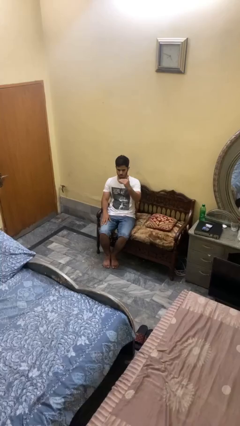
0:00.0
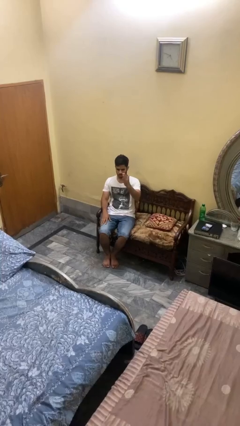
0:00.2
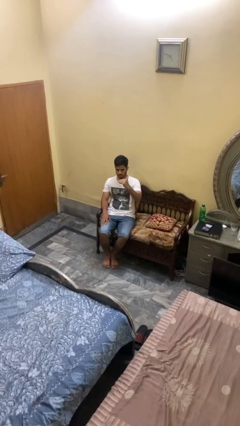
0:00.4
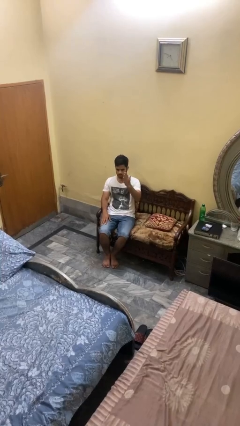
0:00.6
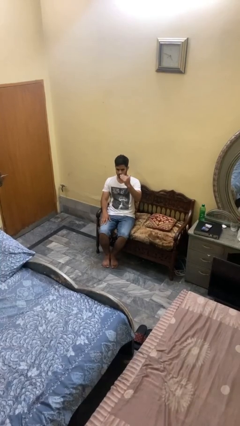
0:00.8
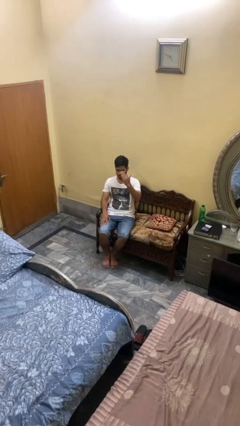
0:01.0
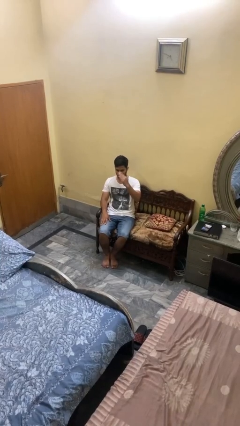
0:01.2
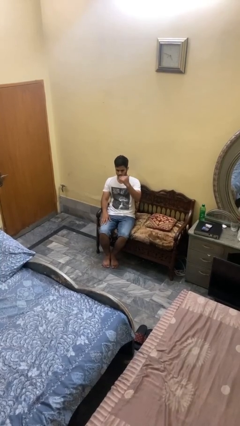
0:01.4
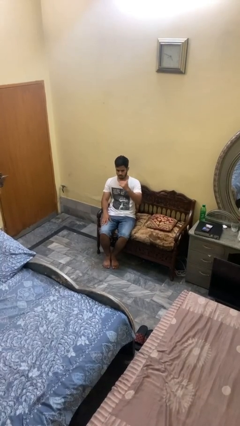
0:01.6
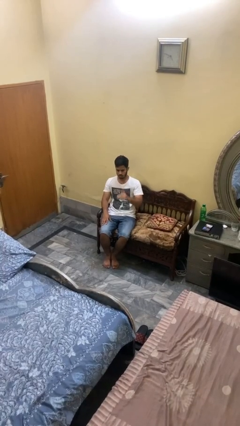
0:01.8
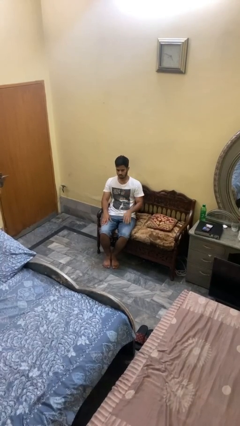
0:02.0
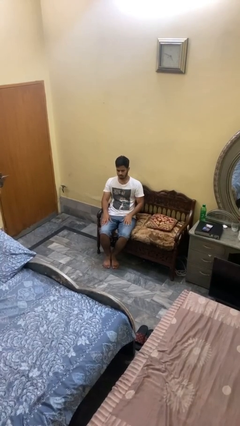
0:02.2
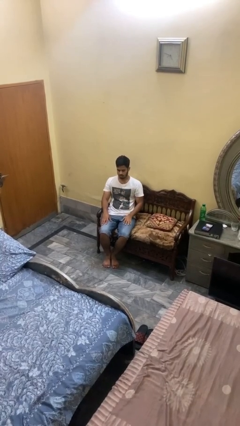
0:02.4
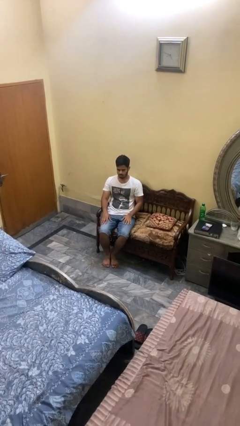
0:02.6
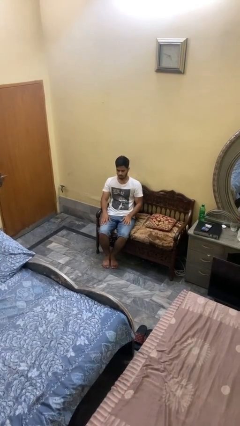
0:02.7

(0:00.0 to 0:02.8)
person gestures come here

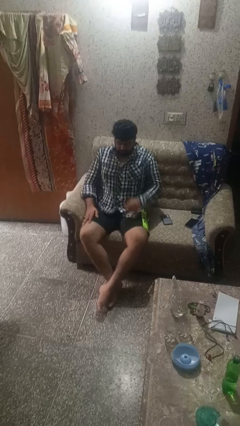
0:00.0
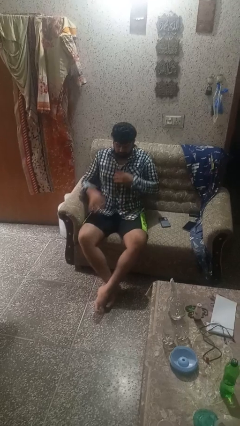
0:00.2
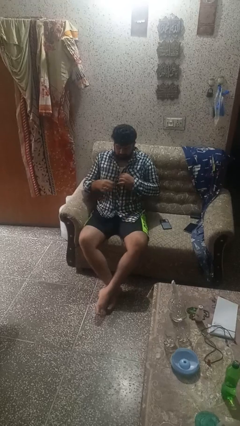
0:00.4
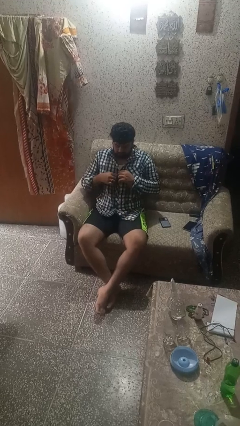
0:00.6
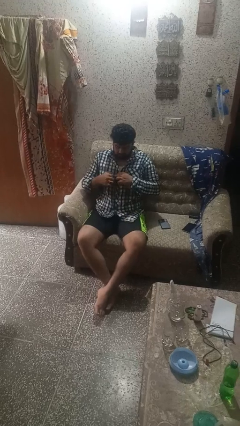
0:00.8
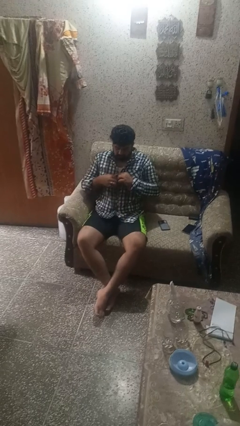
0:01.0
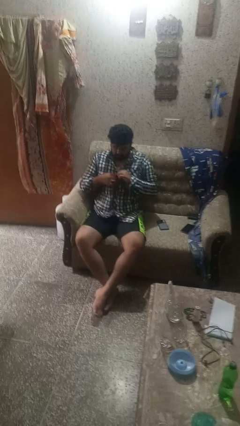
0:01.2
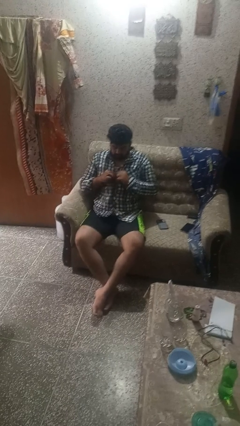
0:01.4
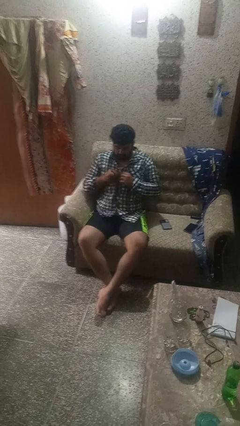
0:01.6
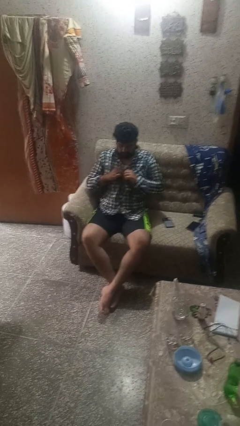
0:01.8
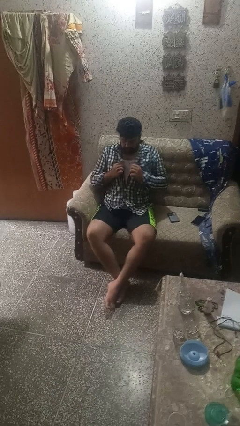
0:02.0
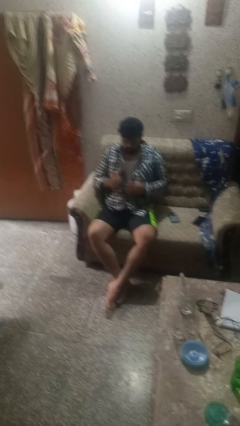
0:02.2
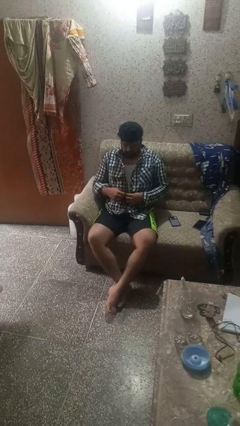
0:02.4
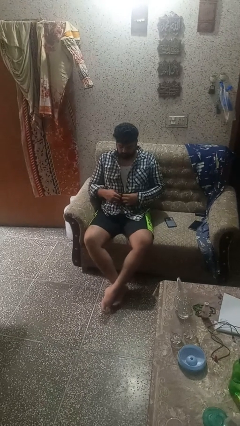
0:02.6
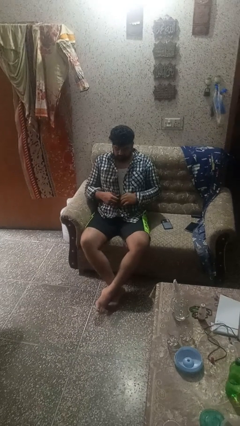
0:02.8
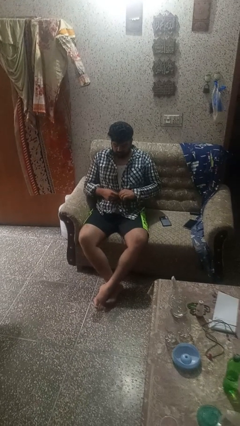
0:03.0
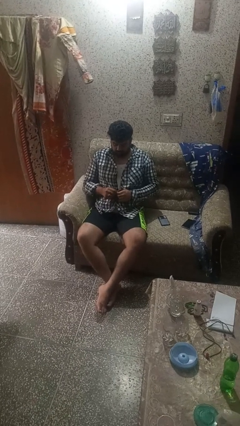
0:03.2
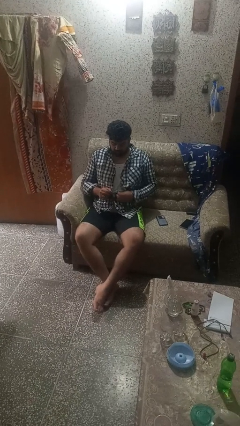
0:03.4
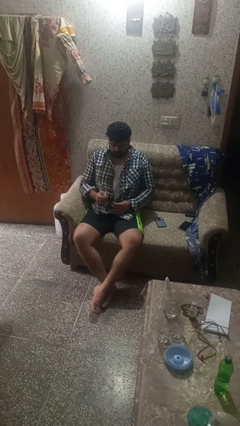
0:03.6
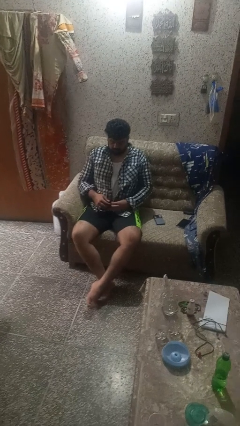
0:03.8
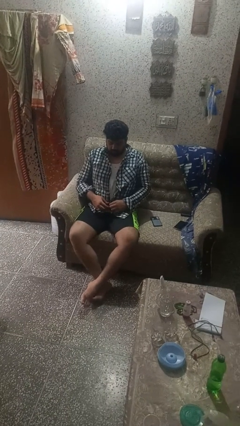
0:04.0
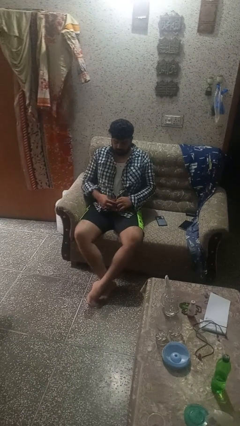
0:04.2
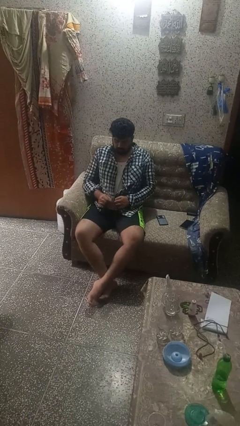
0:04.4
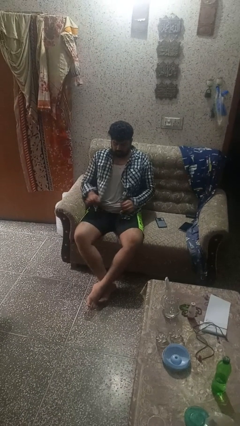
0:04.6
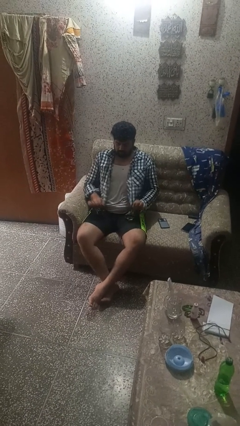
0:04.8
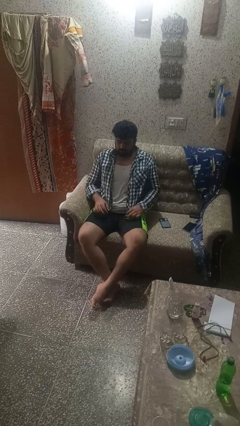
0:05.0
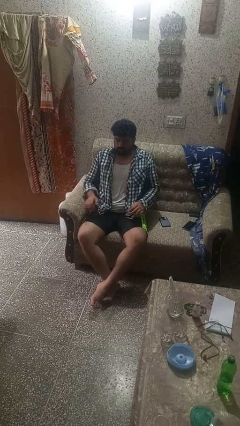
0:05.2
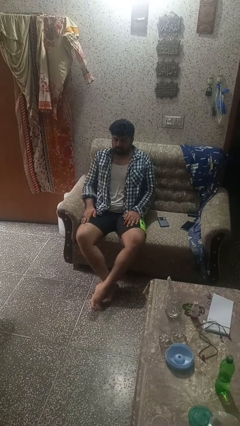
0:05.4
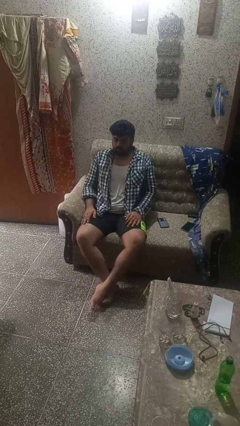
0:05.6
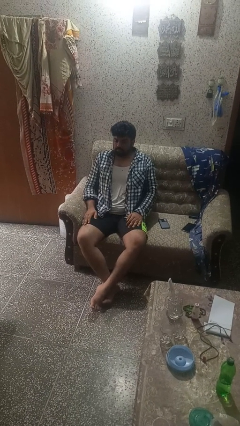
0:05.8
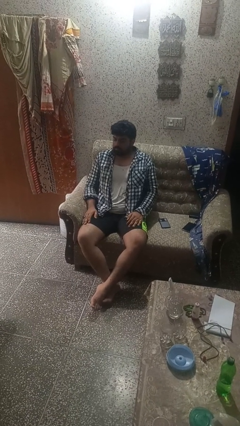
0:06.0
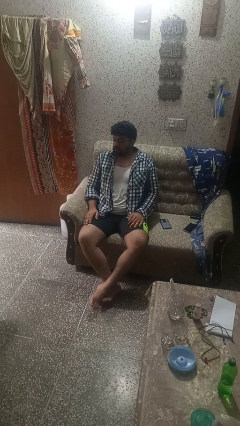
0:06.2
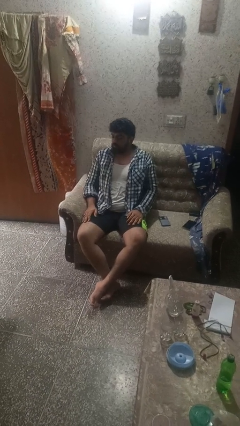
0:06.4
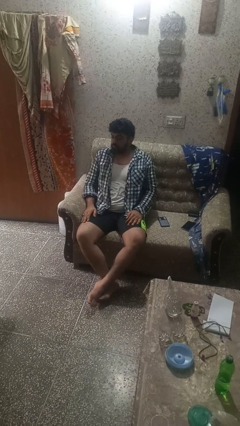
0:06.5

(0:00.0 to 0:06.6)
person unbuttons shirt

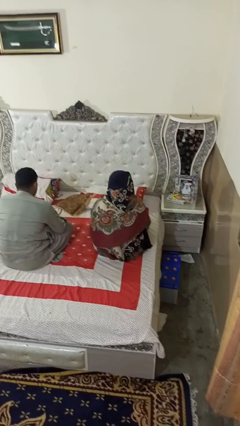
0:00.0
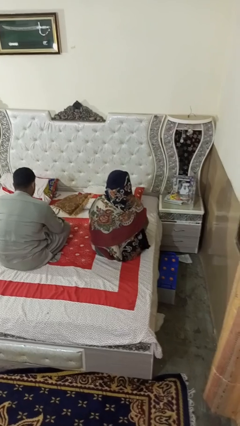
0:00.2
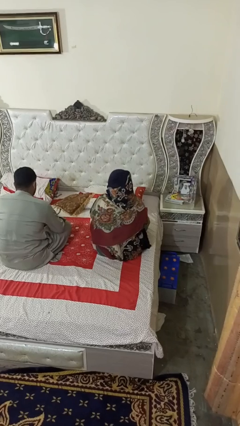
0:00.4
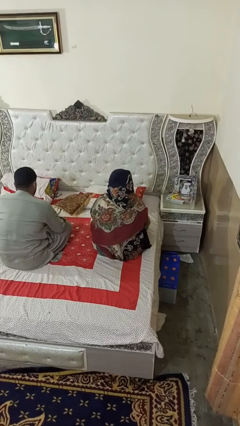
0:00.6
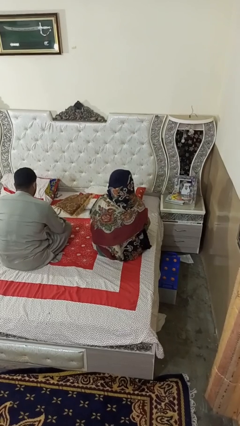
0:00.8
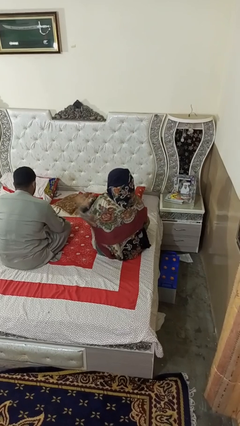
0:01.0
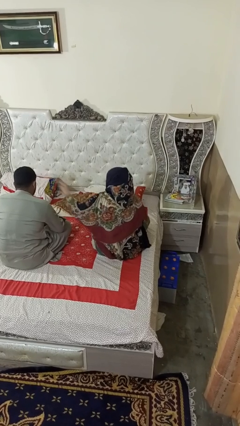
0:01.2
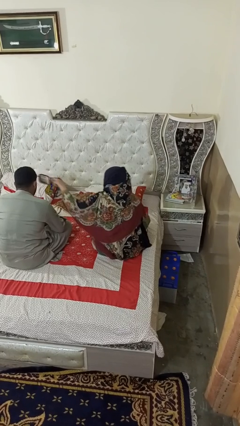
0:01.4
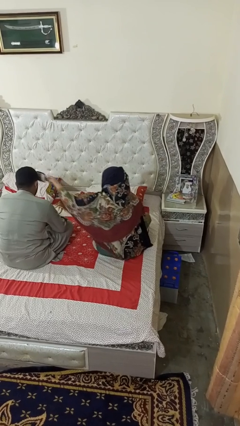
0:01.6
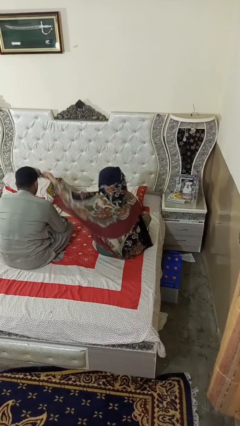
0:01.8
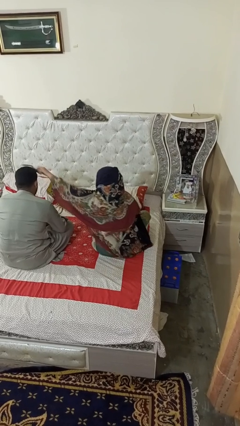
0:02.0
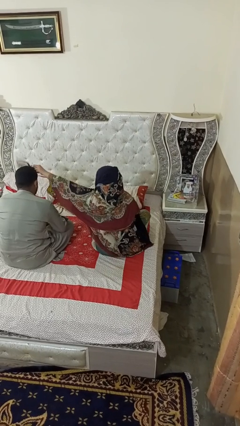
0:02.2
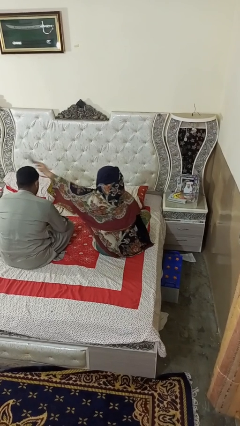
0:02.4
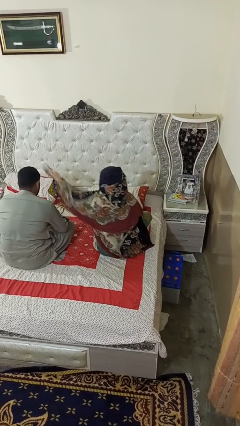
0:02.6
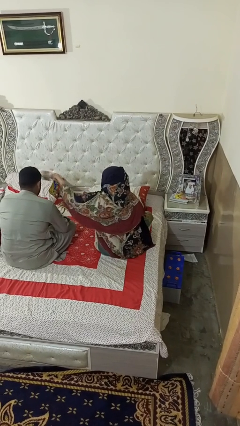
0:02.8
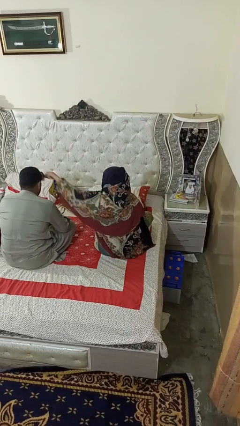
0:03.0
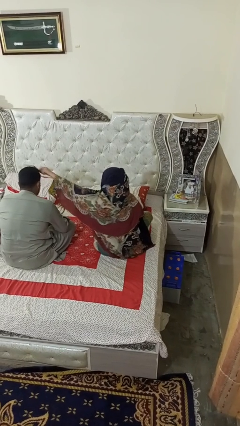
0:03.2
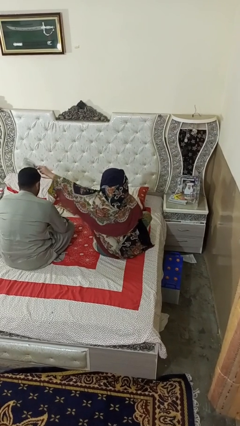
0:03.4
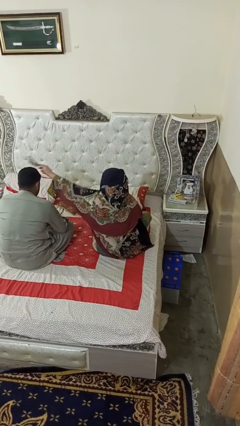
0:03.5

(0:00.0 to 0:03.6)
person brushes hair of person

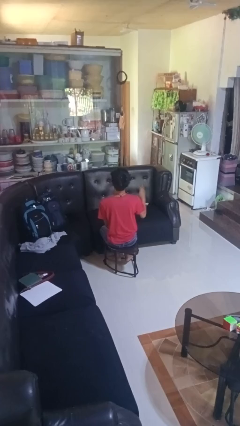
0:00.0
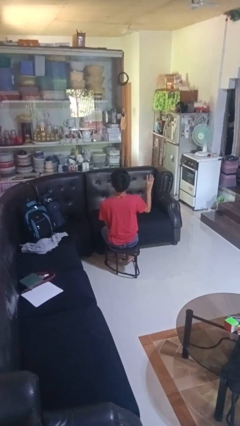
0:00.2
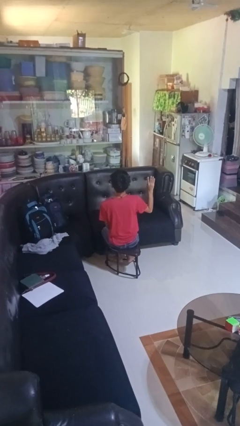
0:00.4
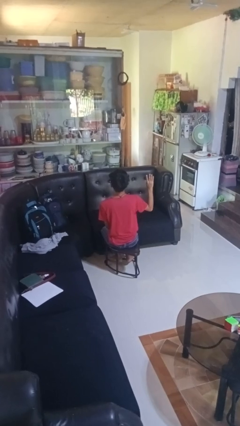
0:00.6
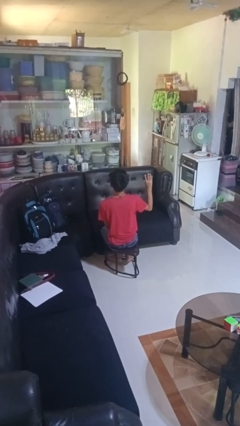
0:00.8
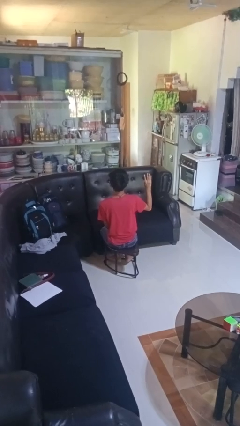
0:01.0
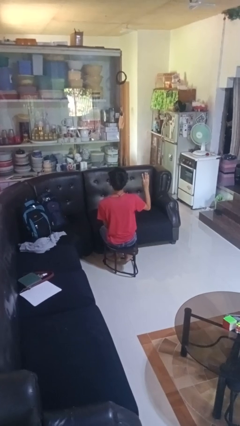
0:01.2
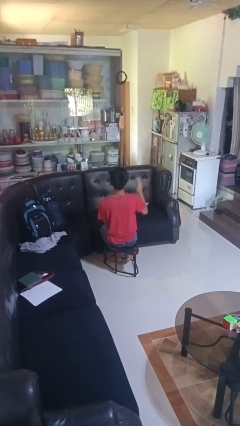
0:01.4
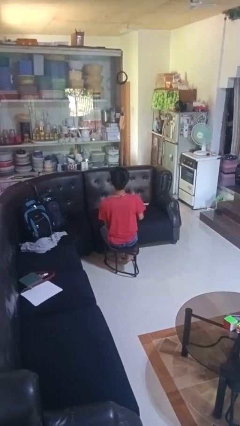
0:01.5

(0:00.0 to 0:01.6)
person gestures number four

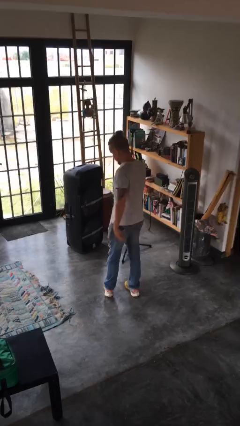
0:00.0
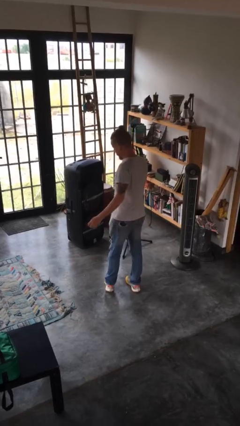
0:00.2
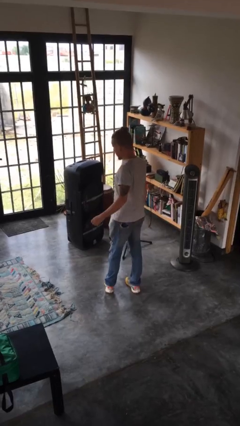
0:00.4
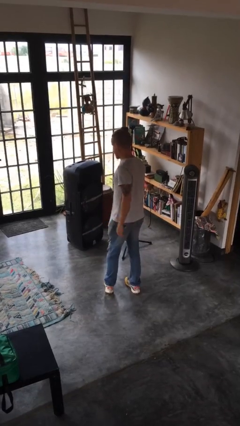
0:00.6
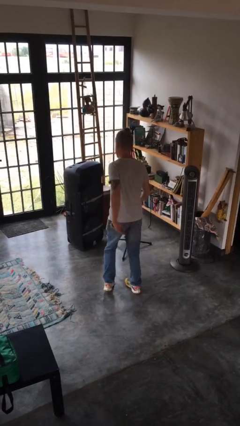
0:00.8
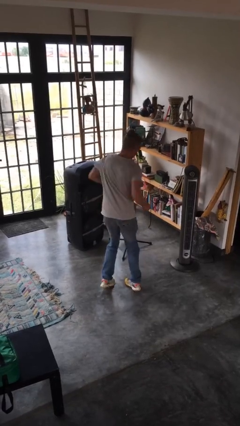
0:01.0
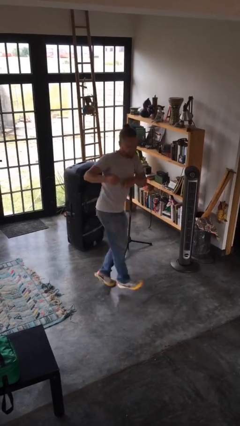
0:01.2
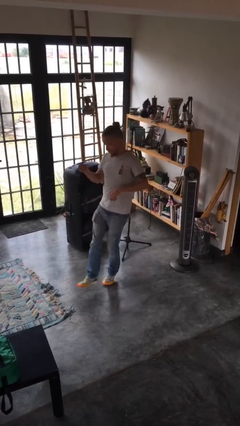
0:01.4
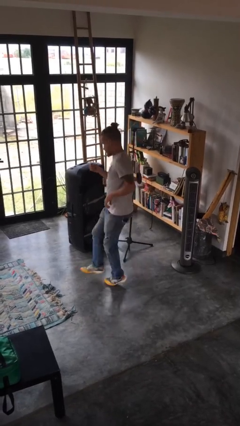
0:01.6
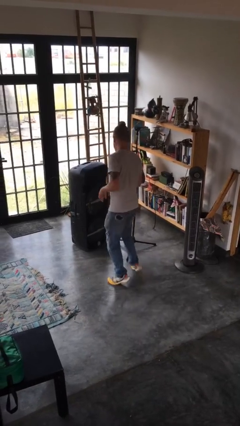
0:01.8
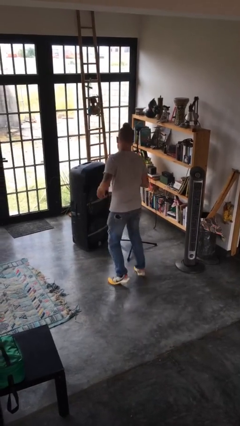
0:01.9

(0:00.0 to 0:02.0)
person twirls

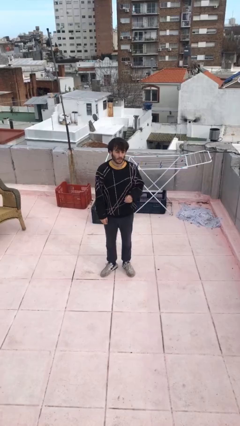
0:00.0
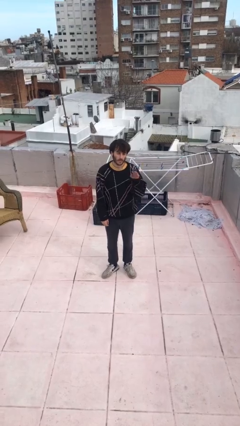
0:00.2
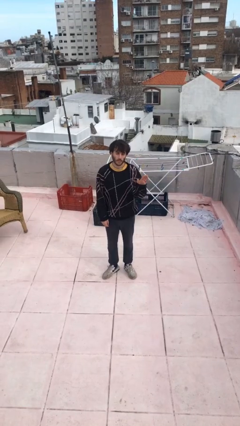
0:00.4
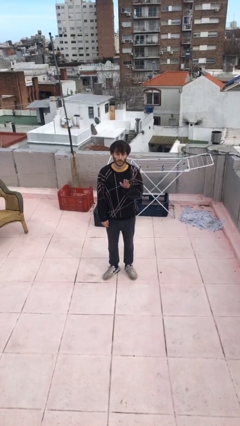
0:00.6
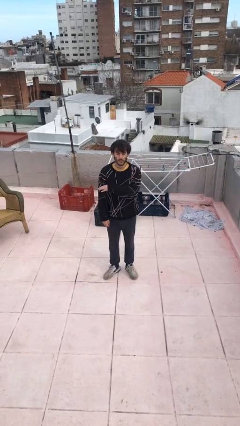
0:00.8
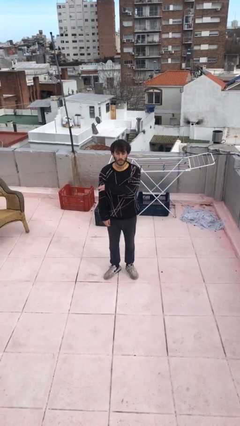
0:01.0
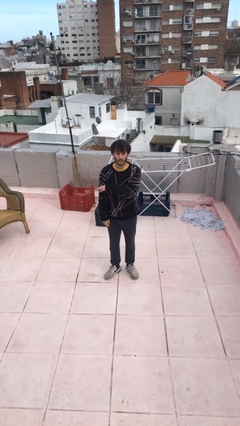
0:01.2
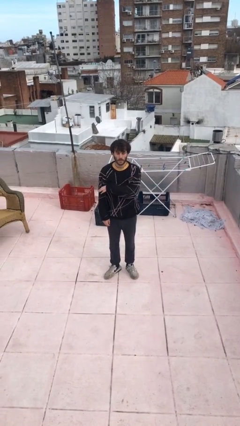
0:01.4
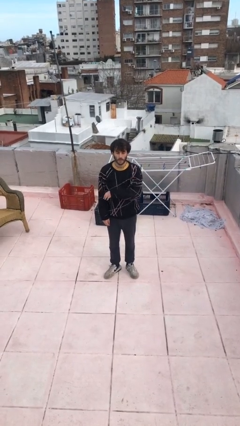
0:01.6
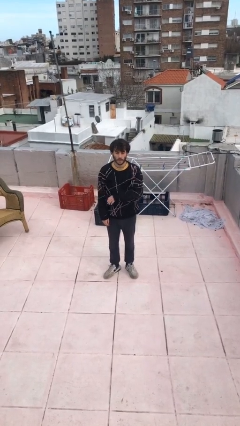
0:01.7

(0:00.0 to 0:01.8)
person gestures swipe right
